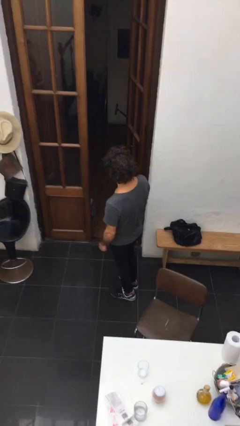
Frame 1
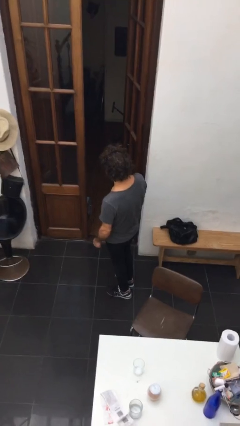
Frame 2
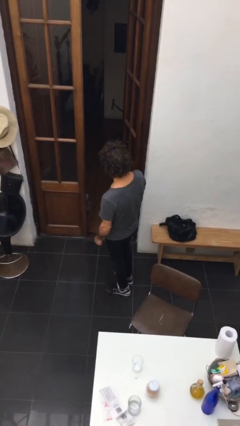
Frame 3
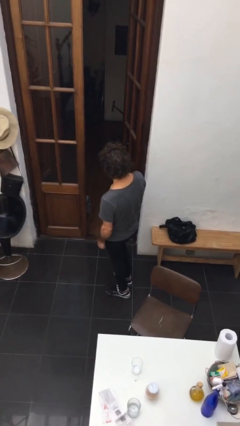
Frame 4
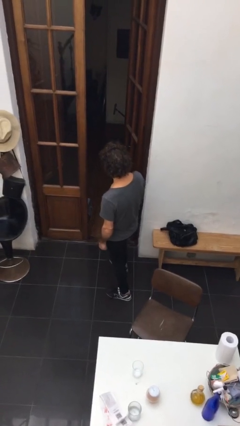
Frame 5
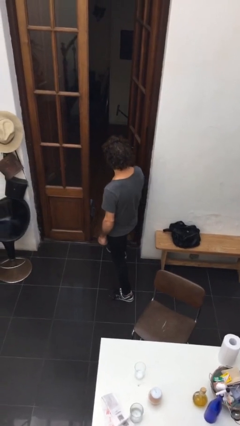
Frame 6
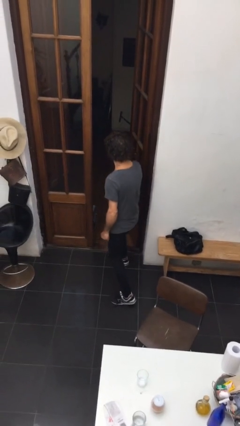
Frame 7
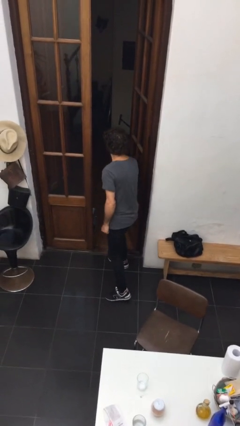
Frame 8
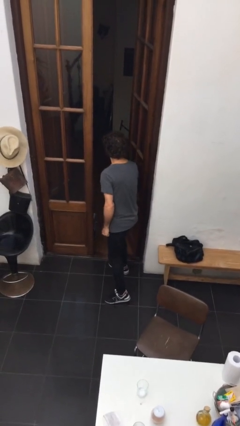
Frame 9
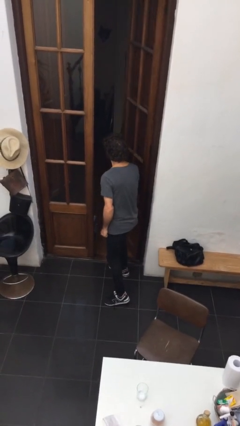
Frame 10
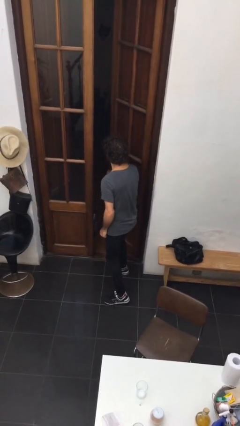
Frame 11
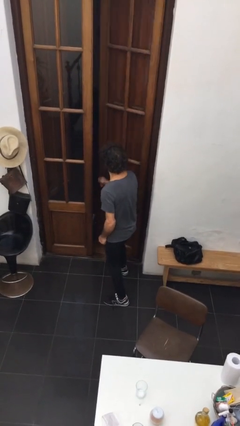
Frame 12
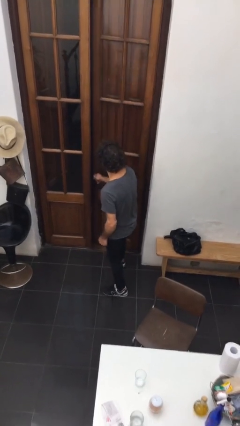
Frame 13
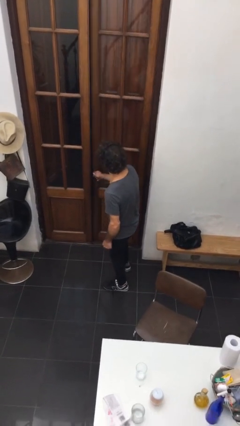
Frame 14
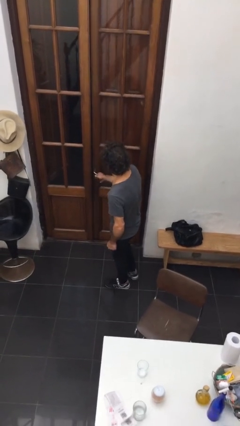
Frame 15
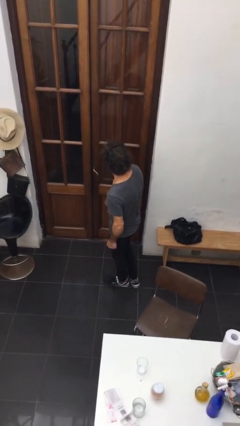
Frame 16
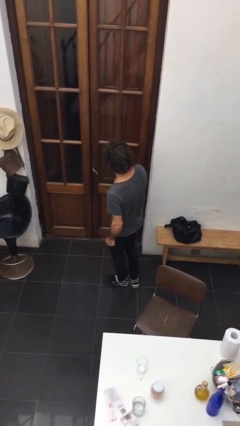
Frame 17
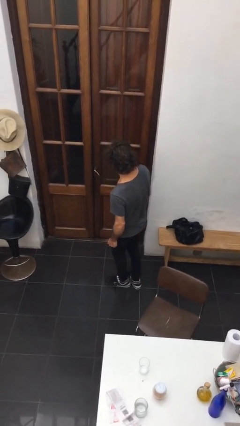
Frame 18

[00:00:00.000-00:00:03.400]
person closes facility door

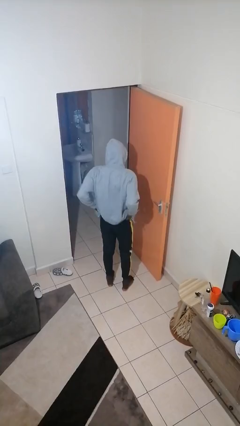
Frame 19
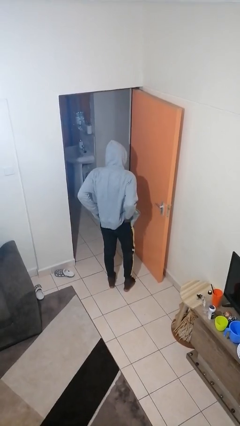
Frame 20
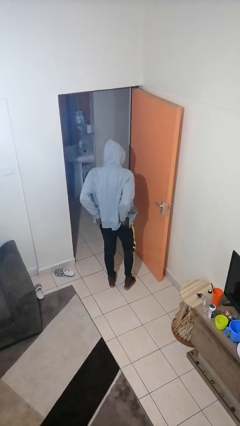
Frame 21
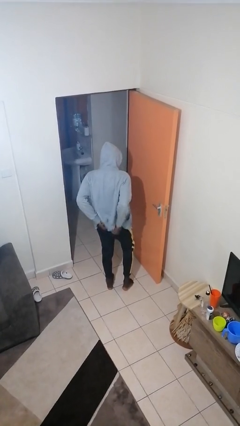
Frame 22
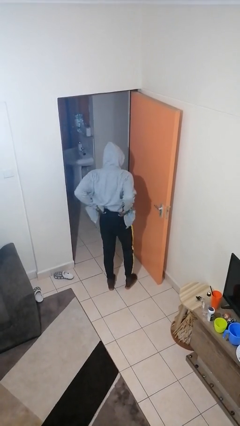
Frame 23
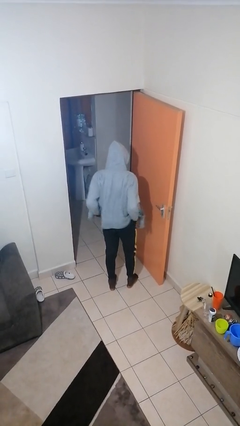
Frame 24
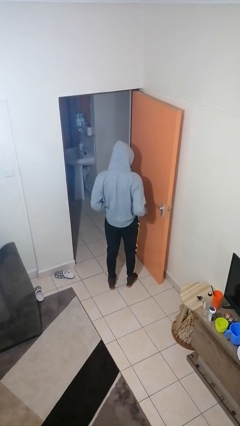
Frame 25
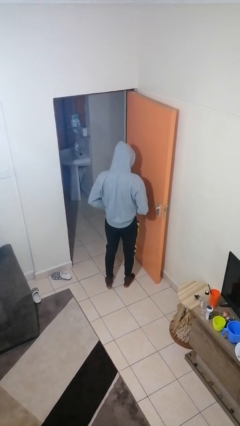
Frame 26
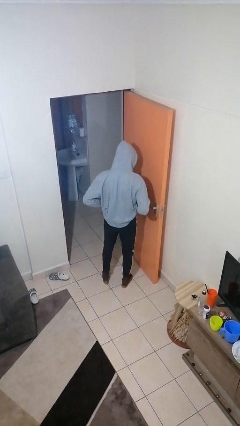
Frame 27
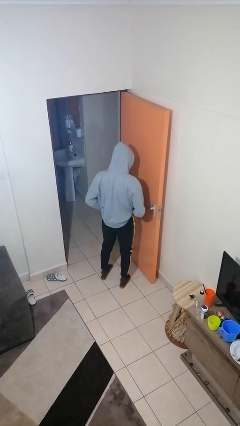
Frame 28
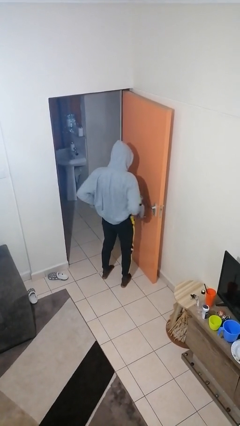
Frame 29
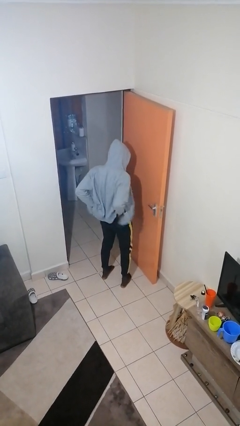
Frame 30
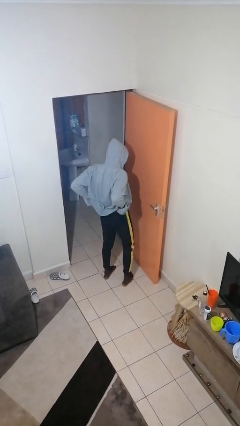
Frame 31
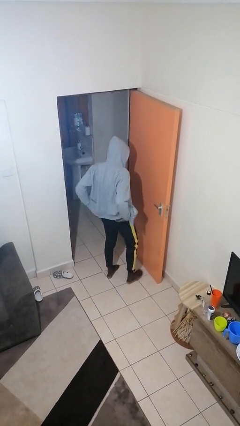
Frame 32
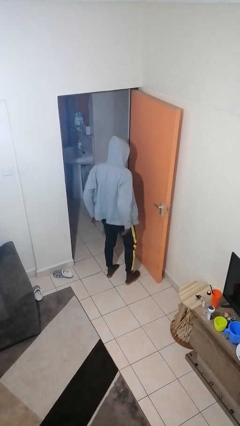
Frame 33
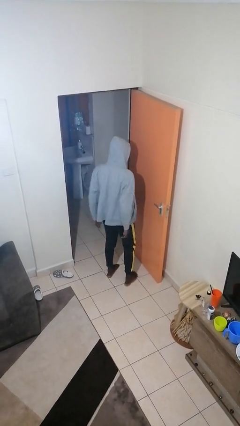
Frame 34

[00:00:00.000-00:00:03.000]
person hikes up pants

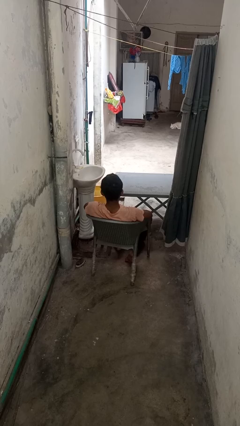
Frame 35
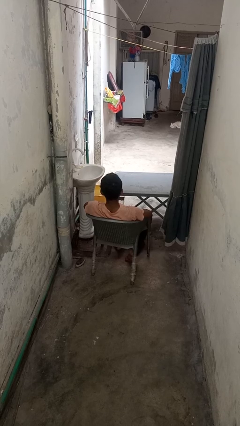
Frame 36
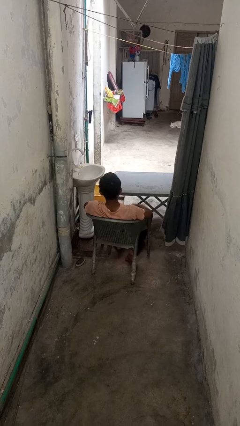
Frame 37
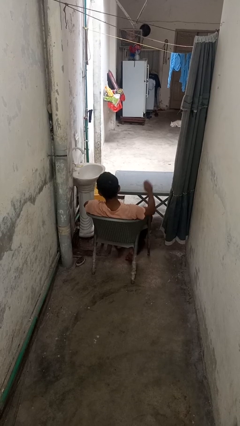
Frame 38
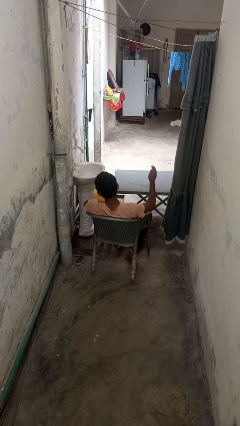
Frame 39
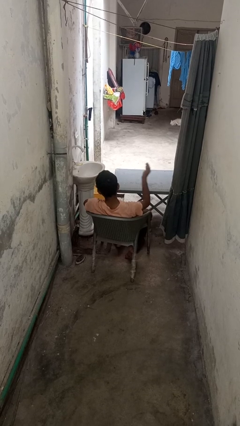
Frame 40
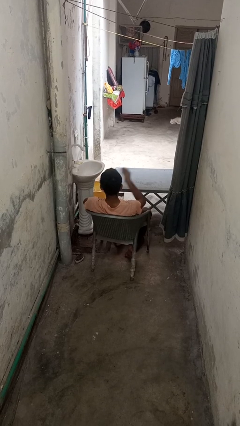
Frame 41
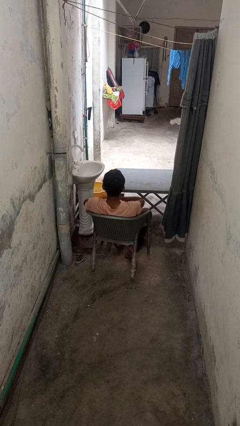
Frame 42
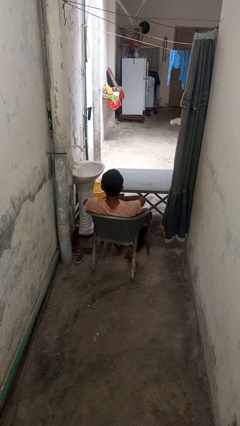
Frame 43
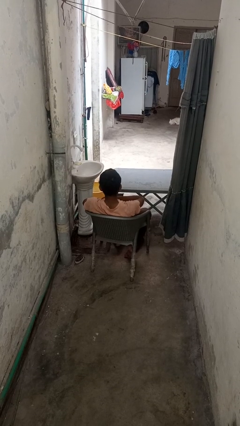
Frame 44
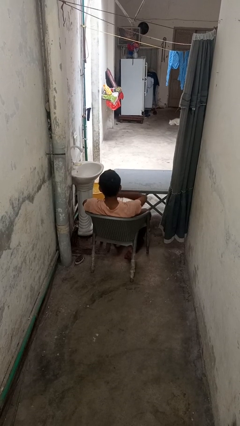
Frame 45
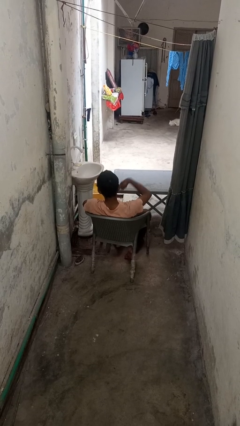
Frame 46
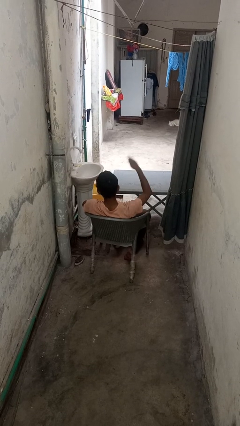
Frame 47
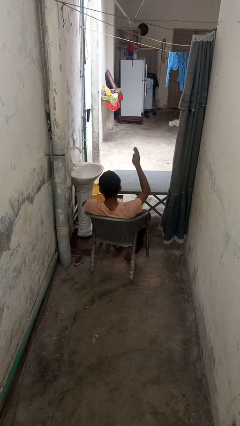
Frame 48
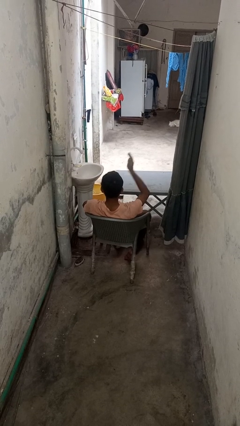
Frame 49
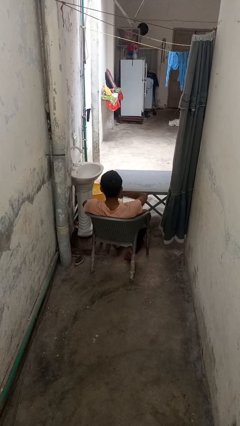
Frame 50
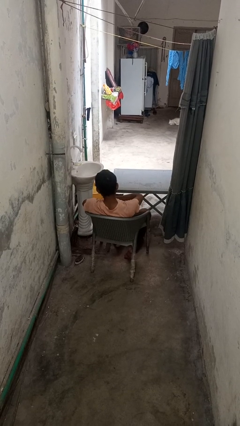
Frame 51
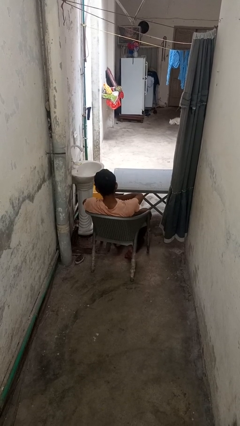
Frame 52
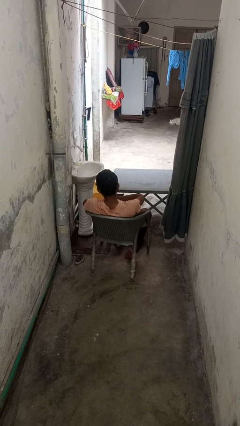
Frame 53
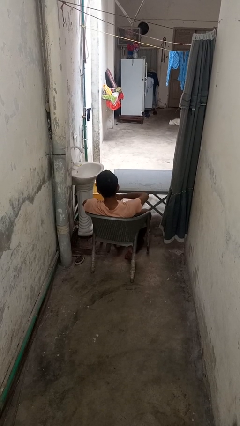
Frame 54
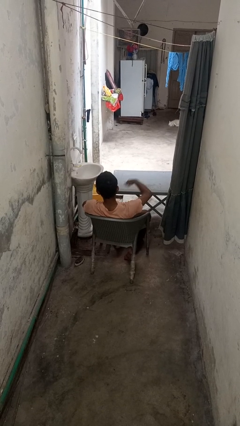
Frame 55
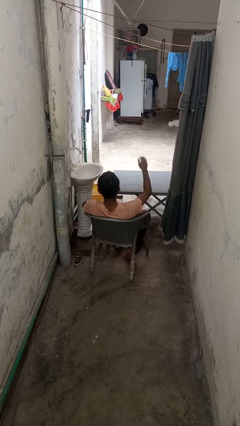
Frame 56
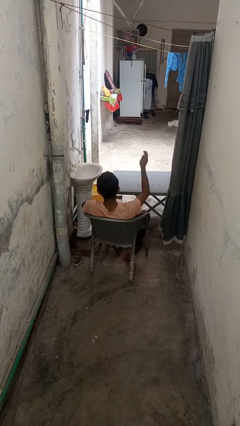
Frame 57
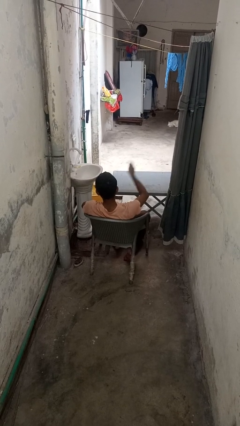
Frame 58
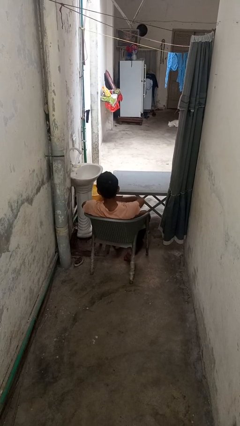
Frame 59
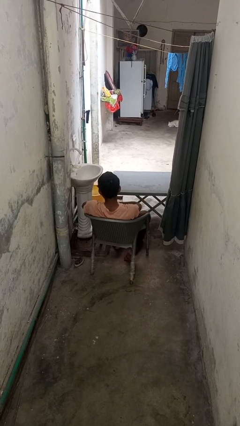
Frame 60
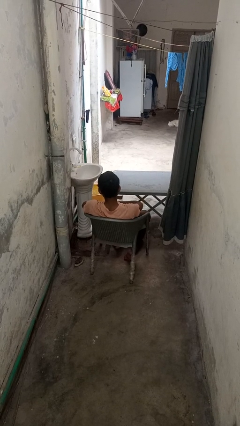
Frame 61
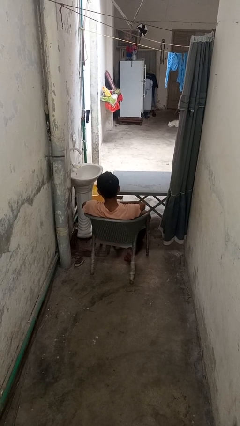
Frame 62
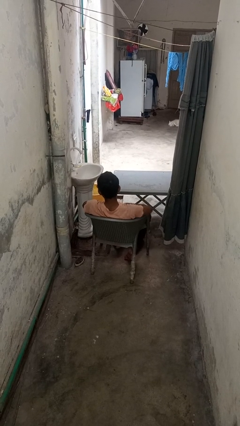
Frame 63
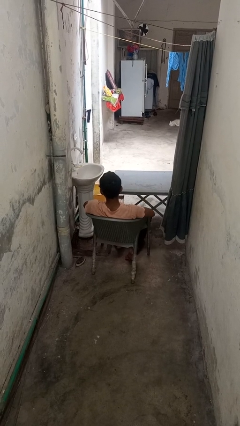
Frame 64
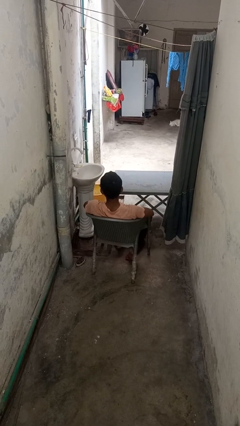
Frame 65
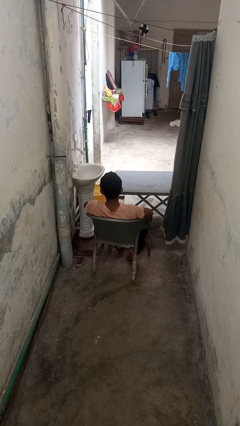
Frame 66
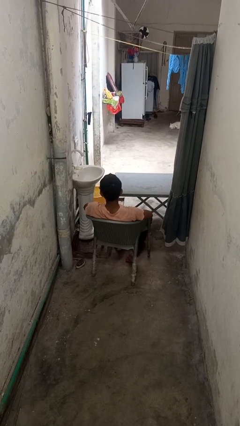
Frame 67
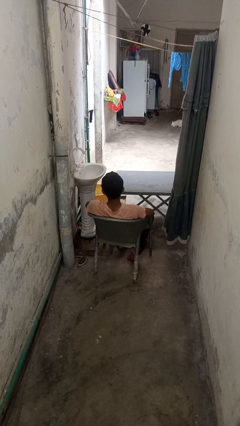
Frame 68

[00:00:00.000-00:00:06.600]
person drums on chest

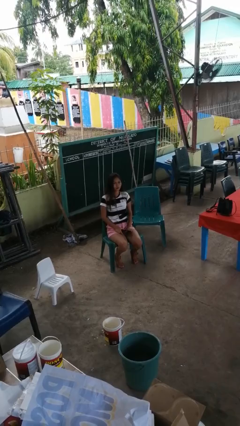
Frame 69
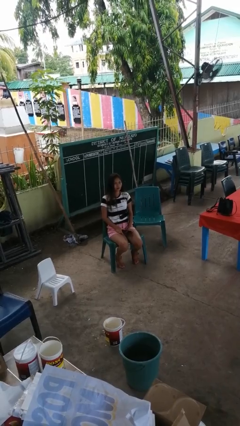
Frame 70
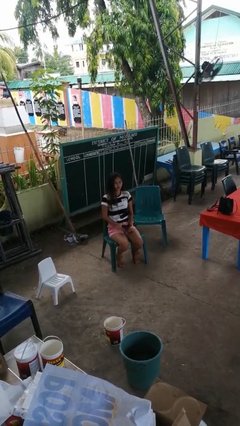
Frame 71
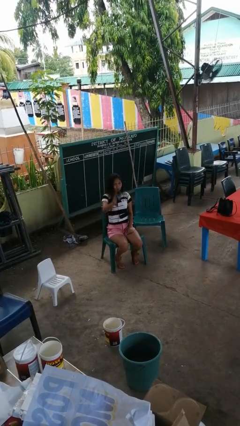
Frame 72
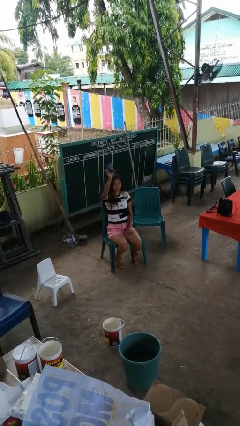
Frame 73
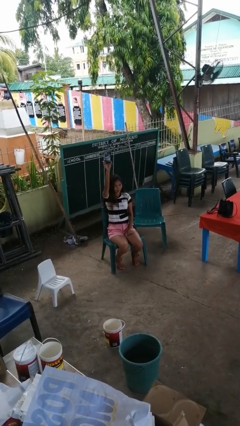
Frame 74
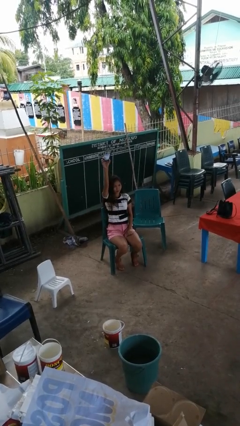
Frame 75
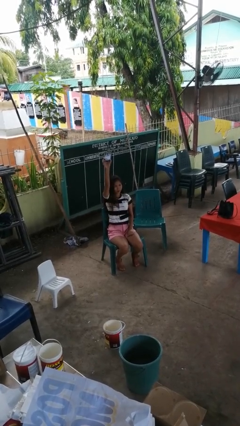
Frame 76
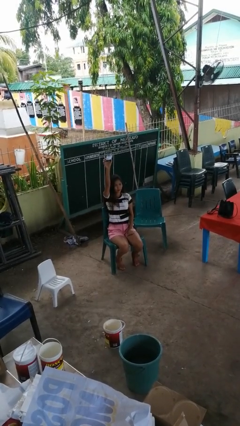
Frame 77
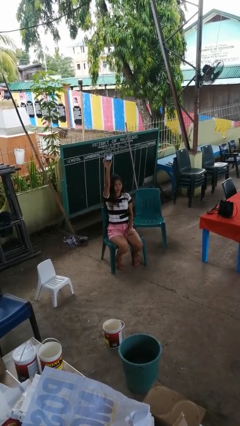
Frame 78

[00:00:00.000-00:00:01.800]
person holds object above head

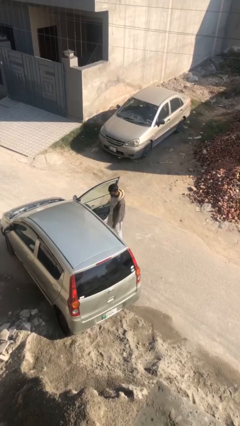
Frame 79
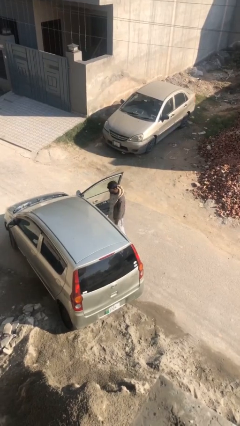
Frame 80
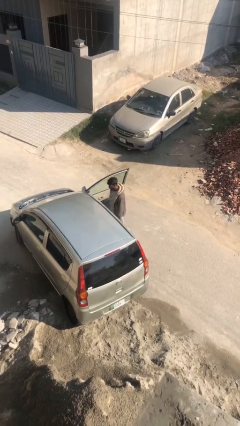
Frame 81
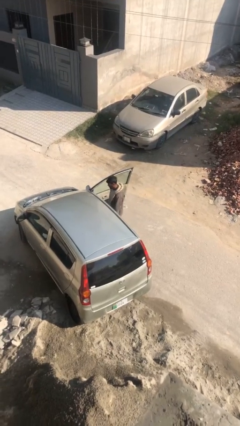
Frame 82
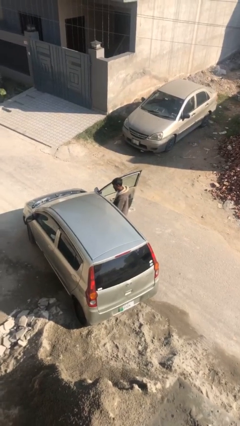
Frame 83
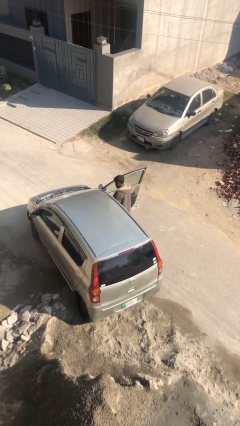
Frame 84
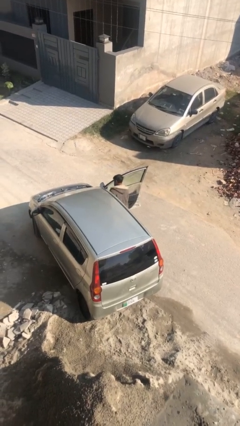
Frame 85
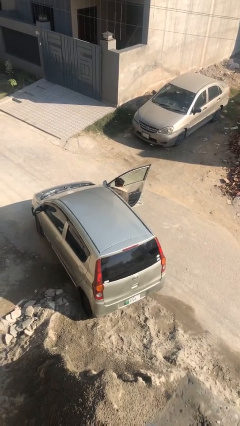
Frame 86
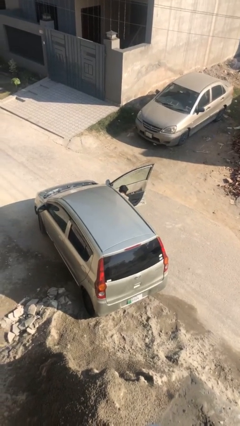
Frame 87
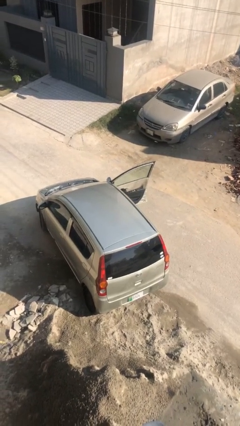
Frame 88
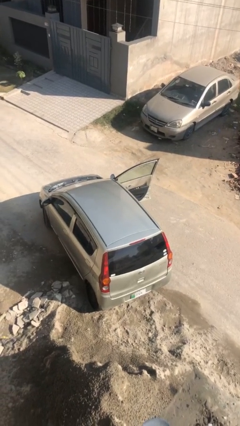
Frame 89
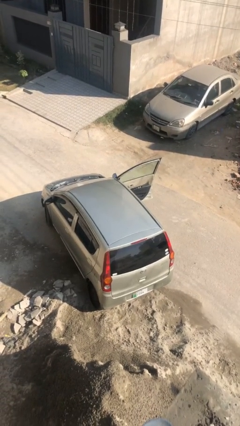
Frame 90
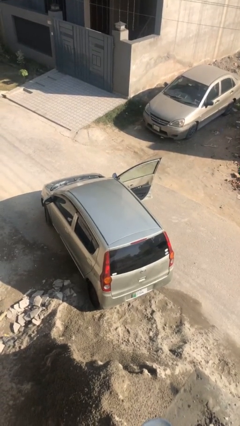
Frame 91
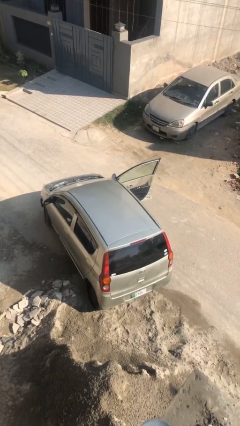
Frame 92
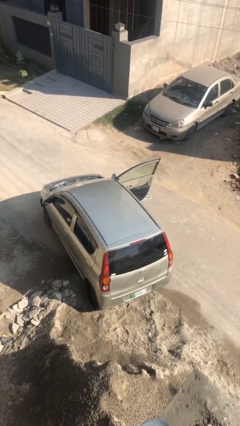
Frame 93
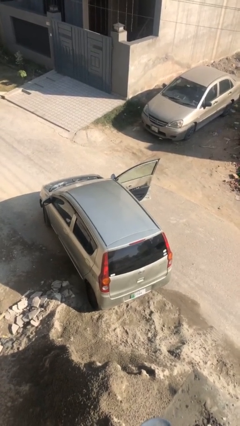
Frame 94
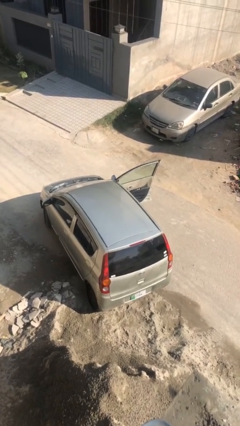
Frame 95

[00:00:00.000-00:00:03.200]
person enters car
